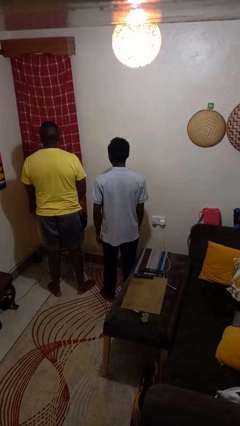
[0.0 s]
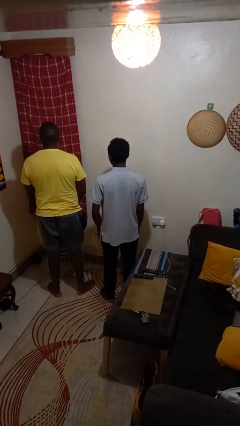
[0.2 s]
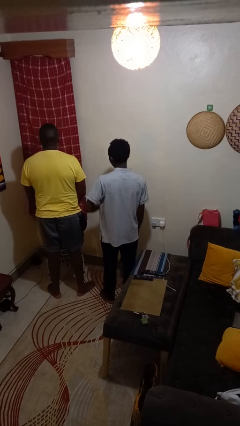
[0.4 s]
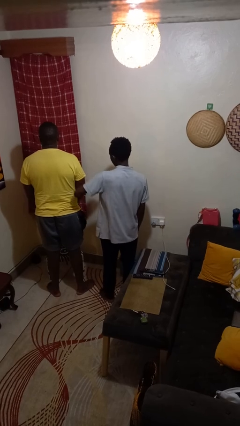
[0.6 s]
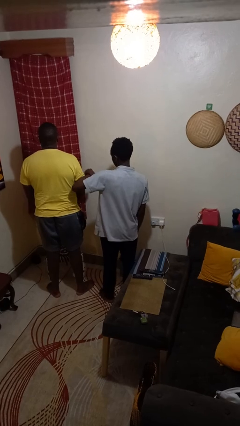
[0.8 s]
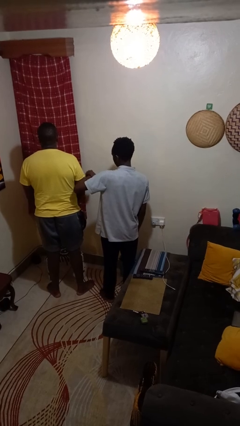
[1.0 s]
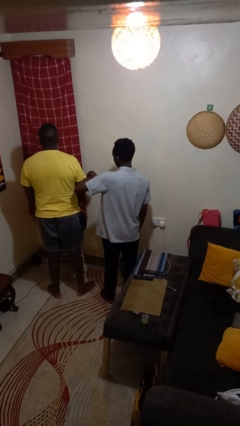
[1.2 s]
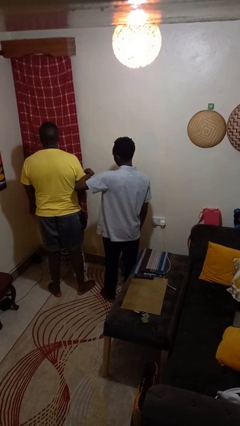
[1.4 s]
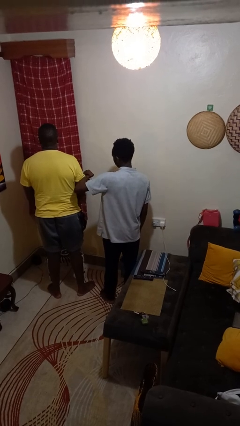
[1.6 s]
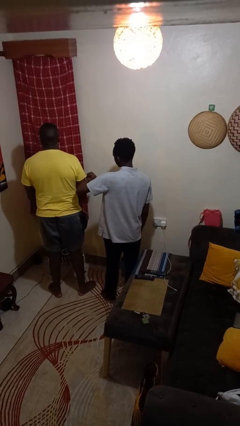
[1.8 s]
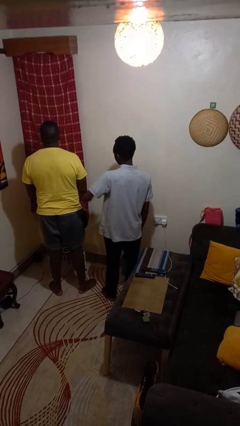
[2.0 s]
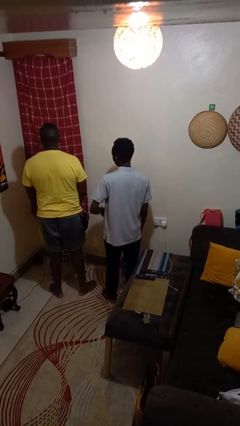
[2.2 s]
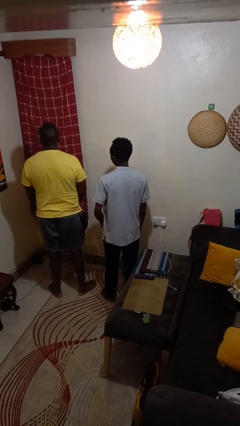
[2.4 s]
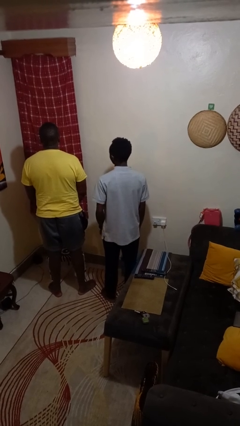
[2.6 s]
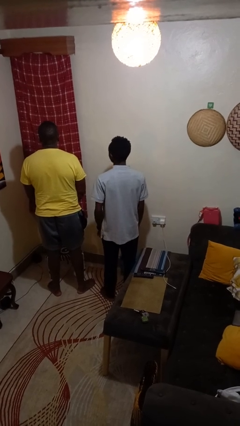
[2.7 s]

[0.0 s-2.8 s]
person nudges person with elbow

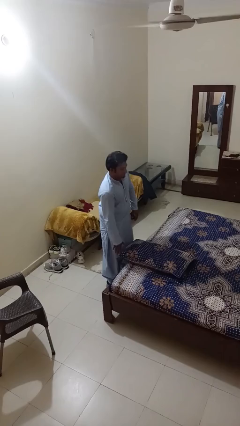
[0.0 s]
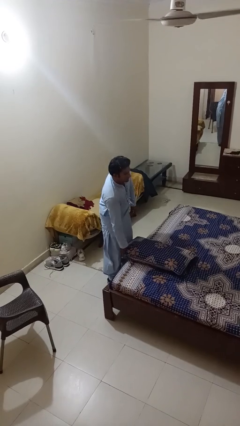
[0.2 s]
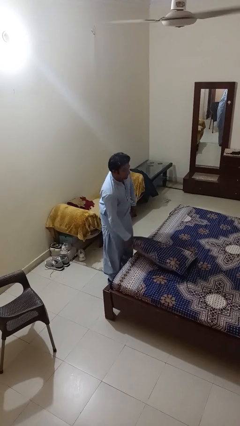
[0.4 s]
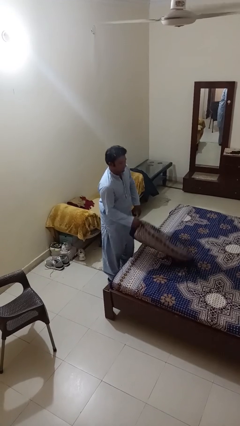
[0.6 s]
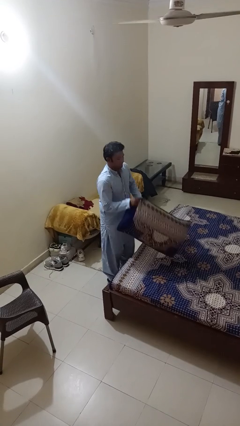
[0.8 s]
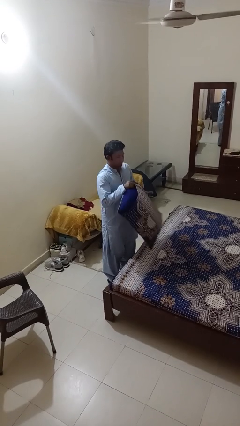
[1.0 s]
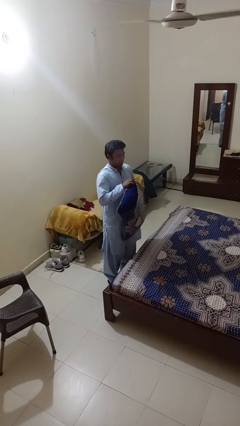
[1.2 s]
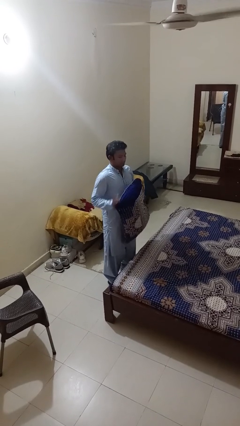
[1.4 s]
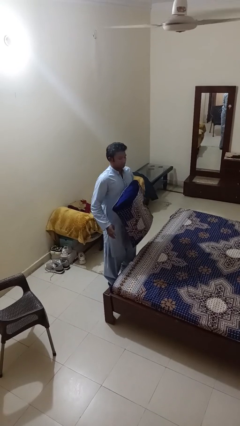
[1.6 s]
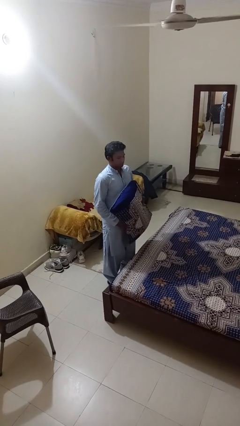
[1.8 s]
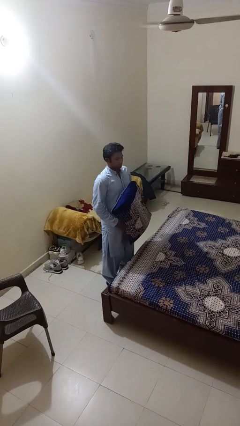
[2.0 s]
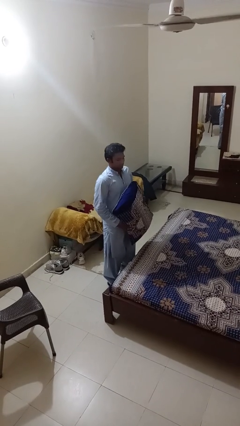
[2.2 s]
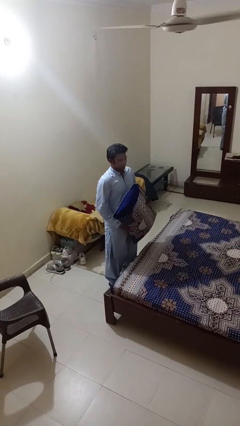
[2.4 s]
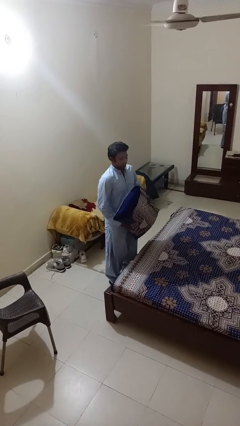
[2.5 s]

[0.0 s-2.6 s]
person picks up object from bed

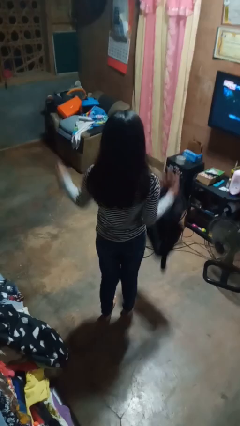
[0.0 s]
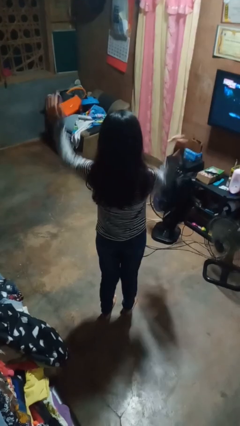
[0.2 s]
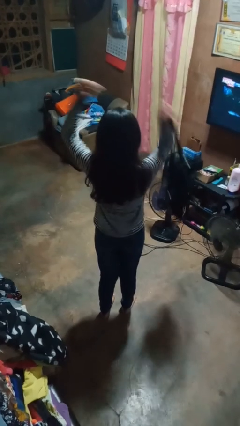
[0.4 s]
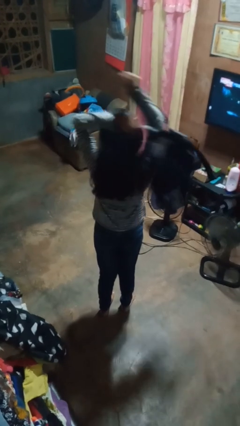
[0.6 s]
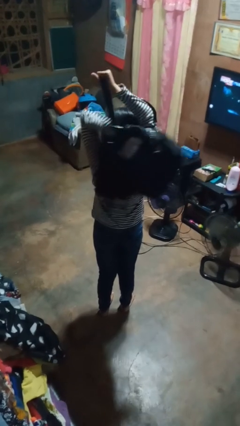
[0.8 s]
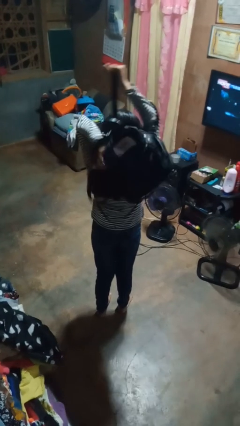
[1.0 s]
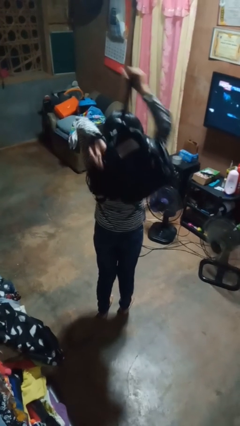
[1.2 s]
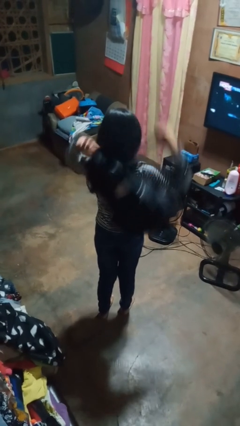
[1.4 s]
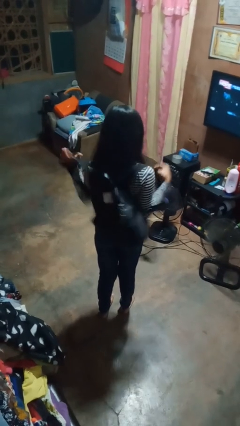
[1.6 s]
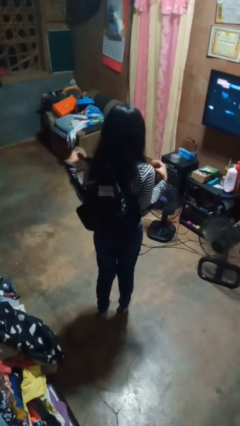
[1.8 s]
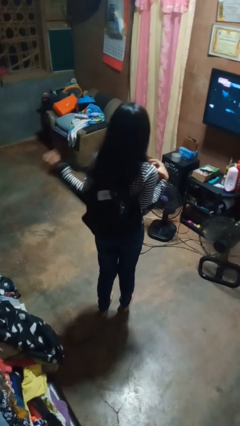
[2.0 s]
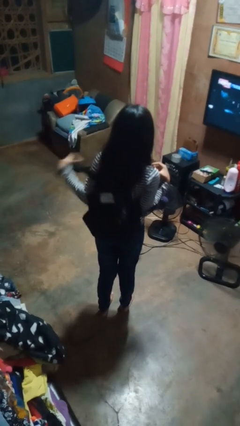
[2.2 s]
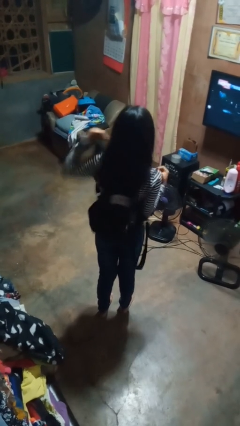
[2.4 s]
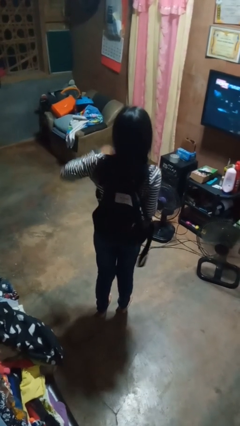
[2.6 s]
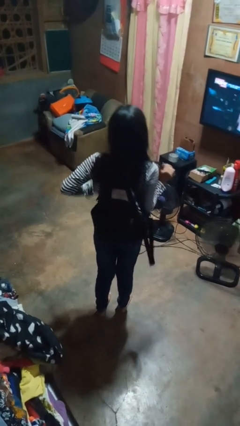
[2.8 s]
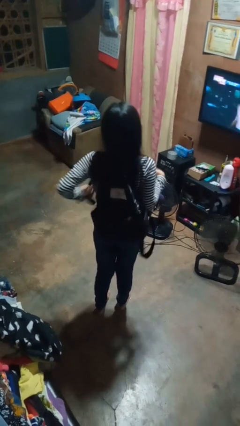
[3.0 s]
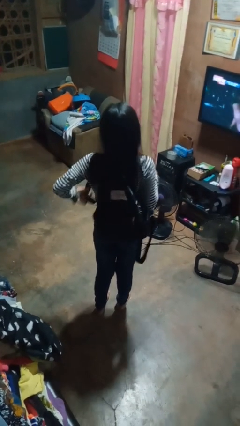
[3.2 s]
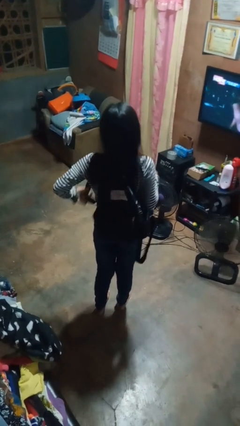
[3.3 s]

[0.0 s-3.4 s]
person puts on backpack

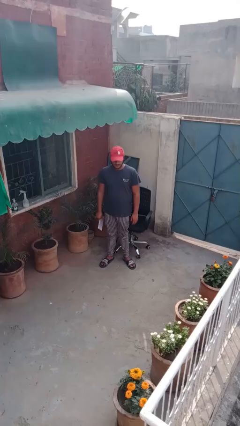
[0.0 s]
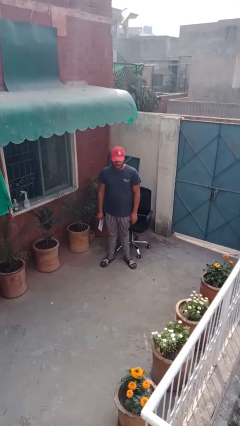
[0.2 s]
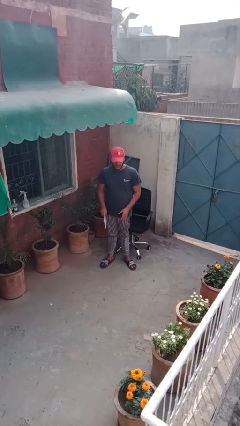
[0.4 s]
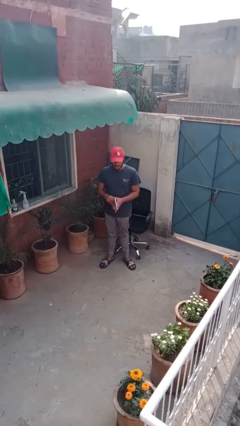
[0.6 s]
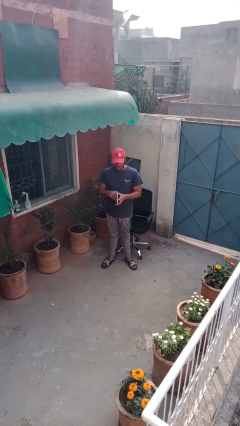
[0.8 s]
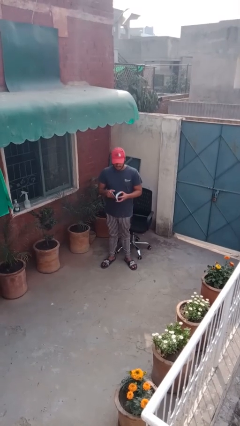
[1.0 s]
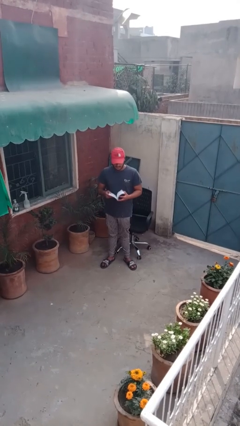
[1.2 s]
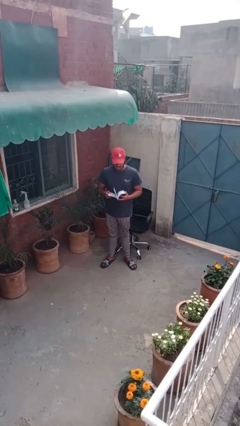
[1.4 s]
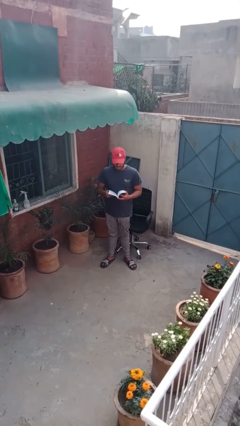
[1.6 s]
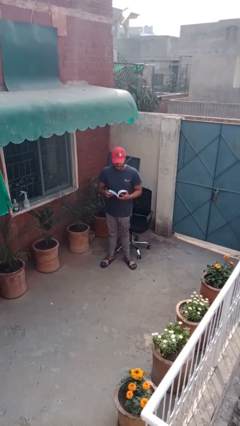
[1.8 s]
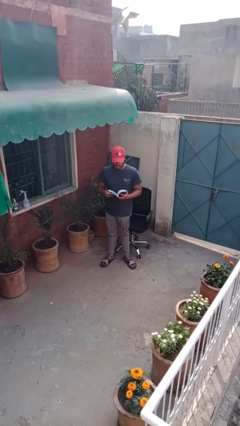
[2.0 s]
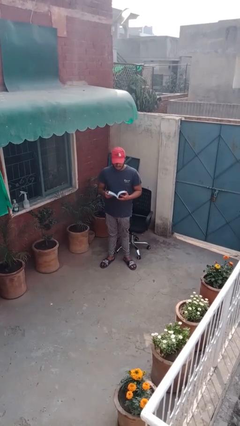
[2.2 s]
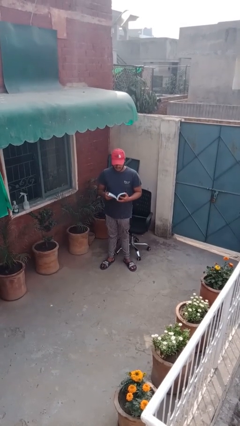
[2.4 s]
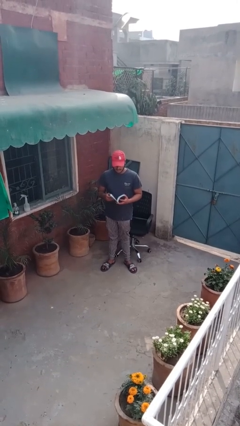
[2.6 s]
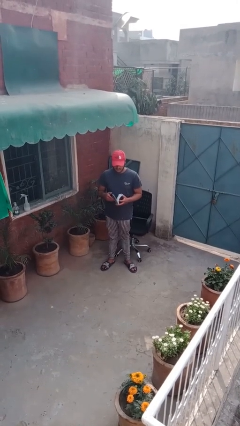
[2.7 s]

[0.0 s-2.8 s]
person reads document

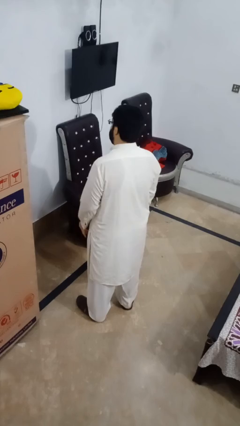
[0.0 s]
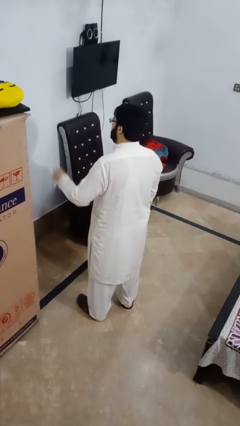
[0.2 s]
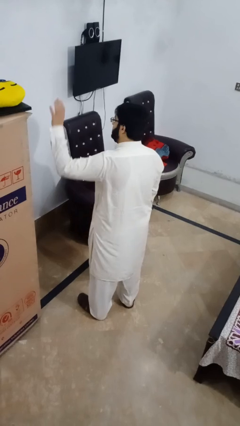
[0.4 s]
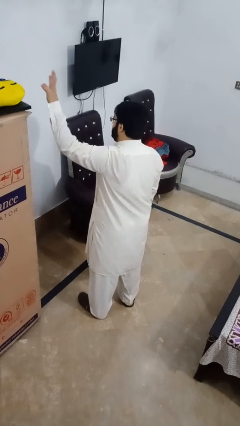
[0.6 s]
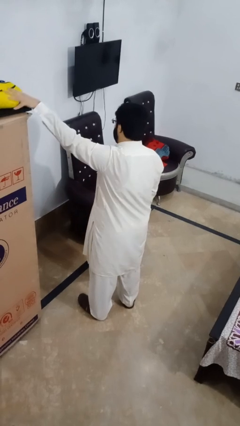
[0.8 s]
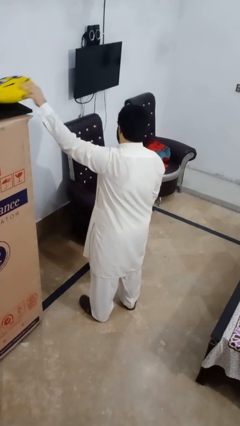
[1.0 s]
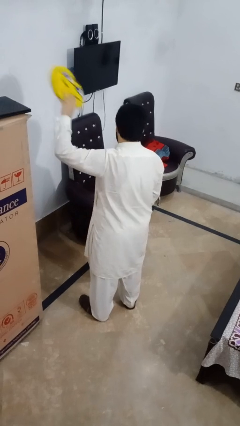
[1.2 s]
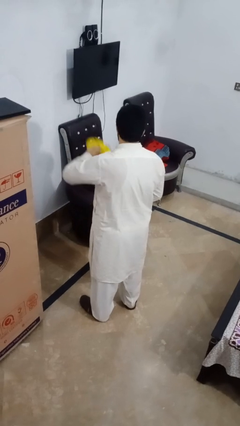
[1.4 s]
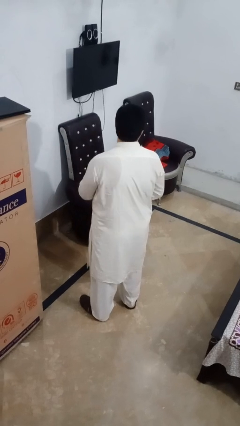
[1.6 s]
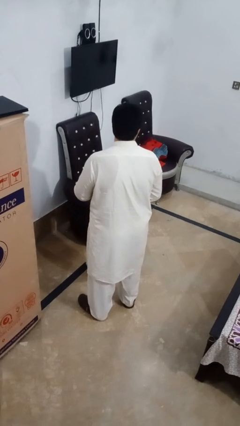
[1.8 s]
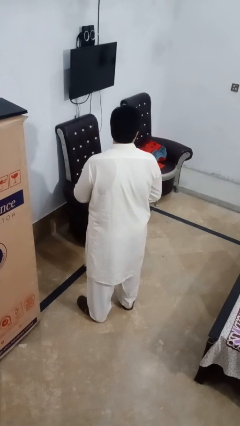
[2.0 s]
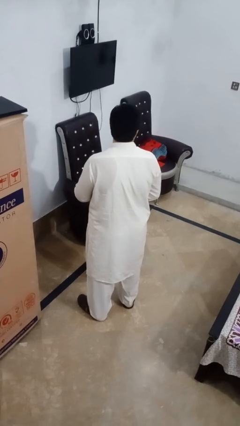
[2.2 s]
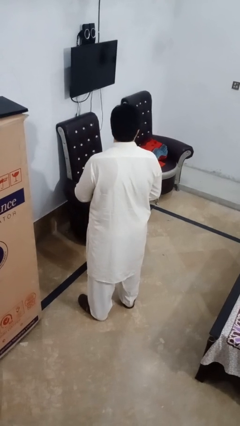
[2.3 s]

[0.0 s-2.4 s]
person picks up object from shelf

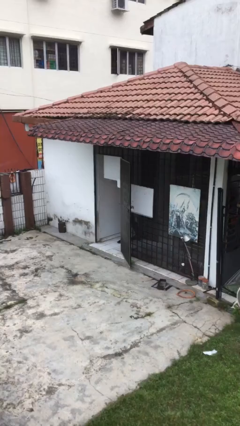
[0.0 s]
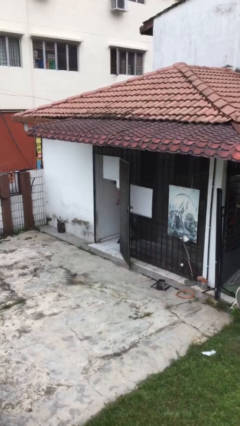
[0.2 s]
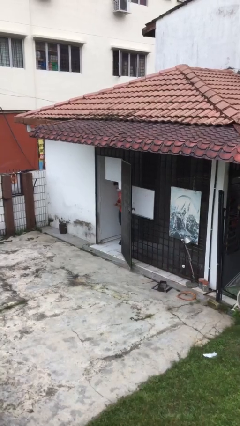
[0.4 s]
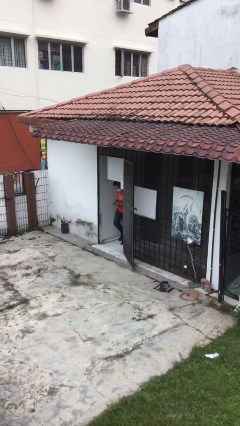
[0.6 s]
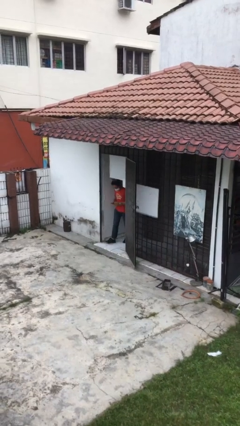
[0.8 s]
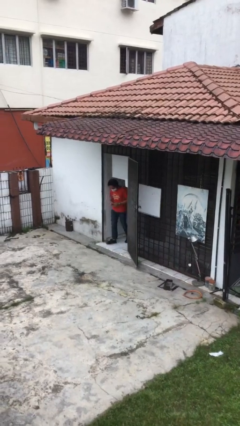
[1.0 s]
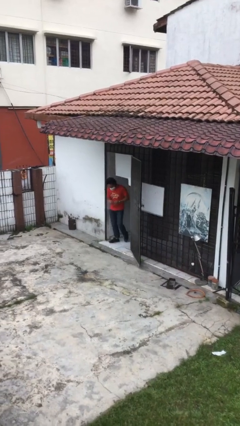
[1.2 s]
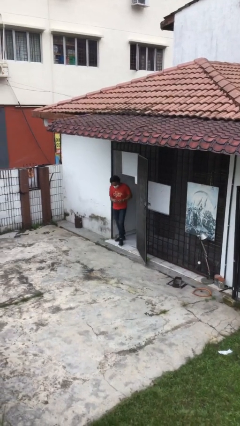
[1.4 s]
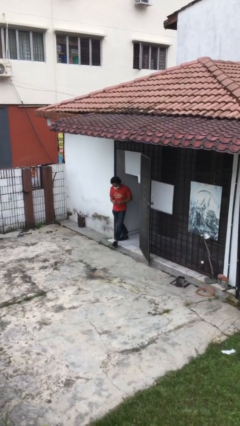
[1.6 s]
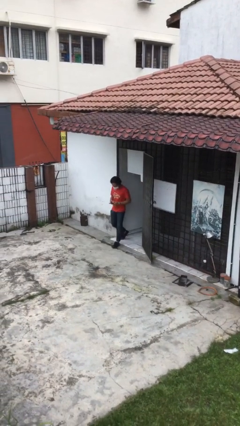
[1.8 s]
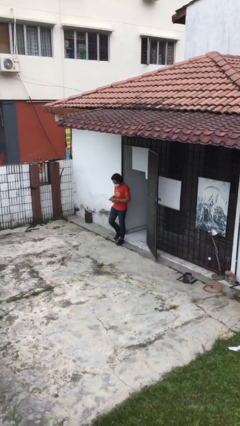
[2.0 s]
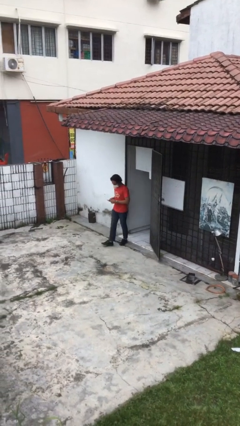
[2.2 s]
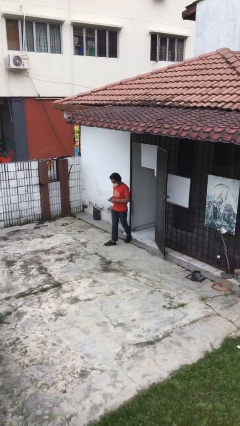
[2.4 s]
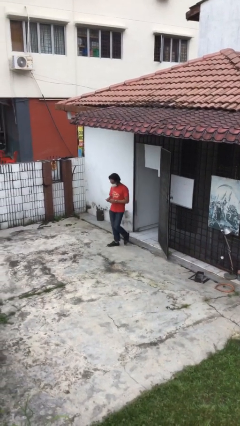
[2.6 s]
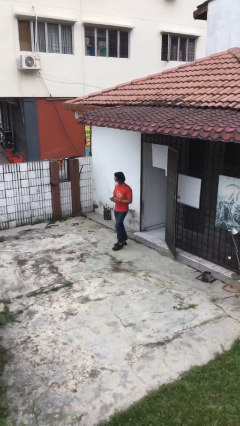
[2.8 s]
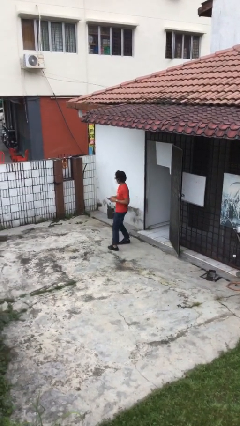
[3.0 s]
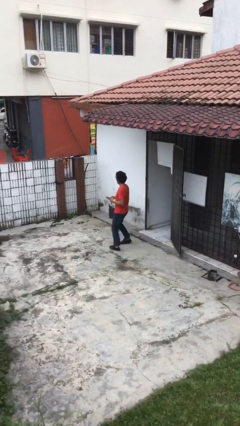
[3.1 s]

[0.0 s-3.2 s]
person enters scene through structure

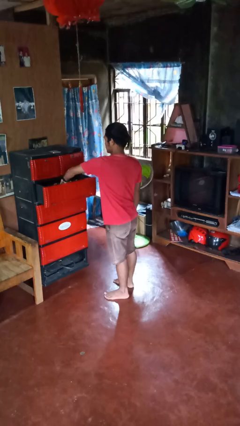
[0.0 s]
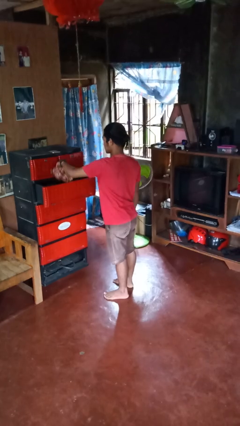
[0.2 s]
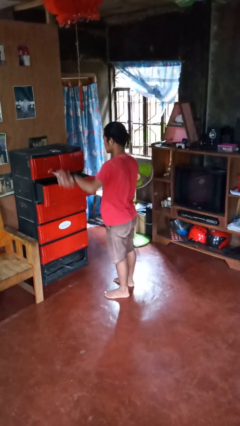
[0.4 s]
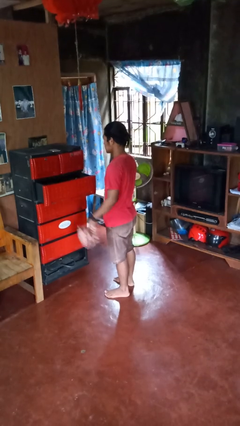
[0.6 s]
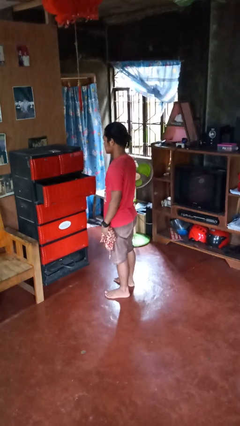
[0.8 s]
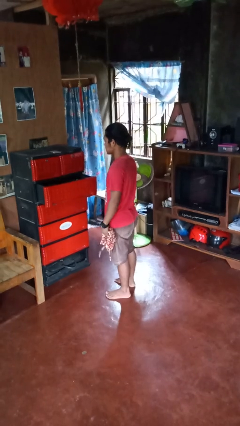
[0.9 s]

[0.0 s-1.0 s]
person takes clothes from dresser
